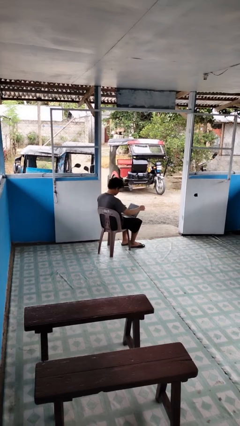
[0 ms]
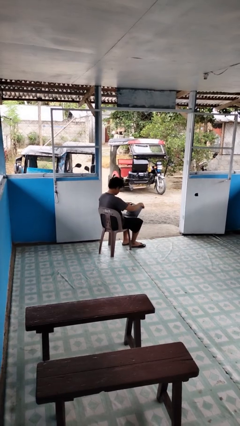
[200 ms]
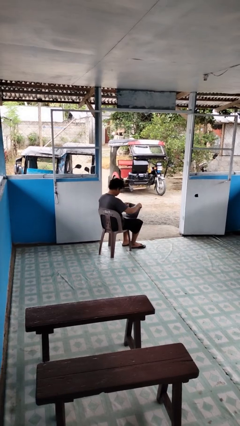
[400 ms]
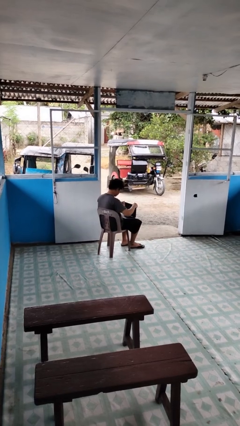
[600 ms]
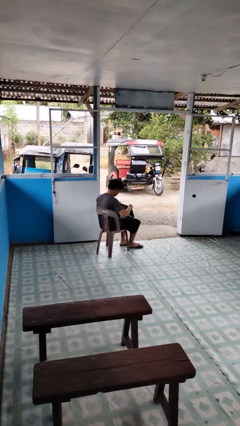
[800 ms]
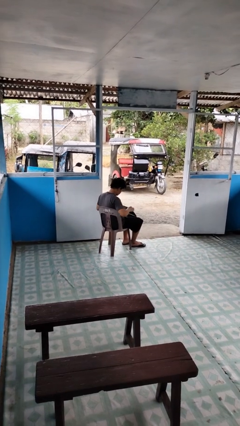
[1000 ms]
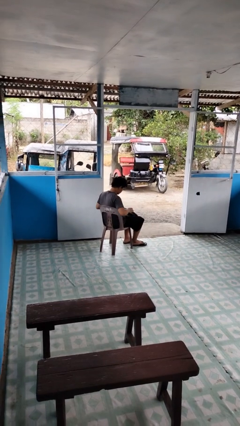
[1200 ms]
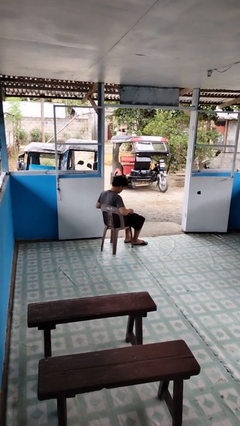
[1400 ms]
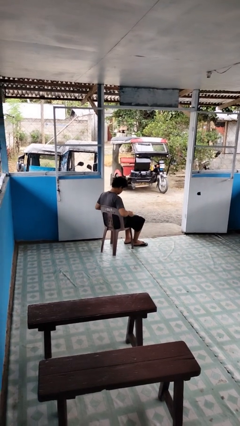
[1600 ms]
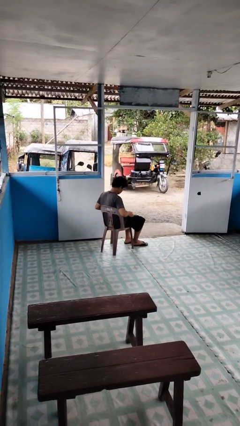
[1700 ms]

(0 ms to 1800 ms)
person closes laptop

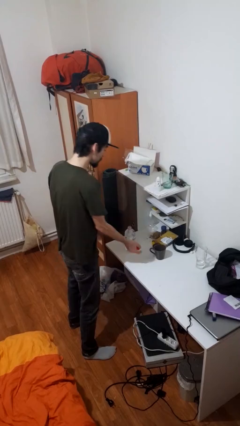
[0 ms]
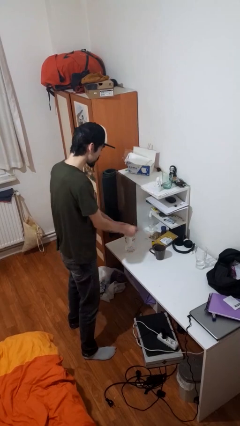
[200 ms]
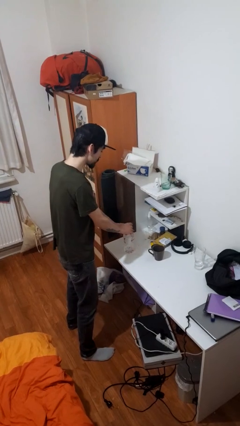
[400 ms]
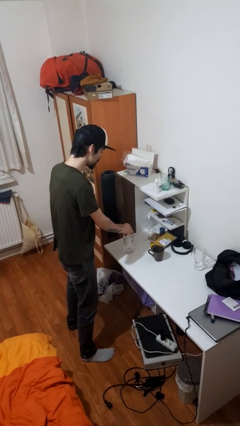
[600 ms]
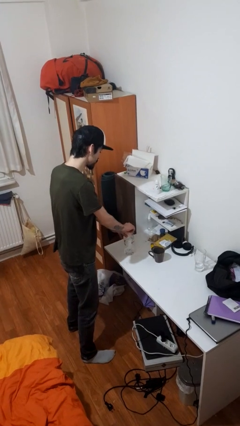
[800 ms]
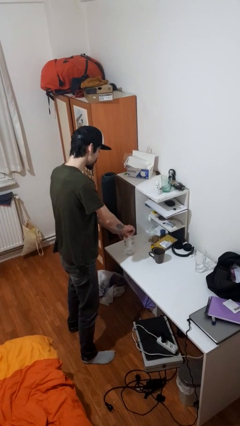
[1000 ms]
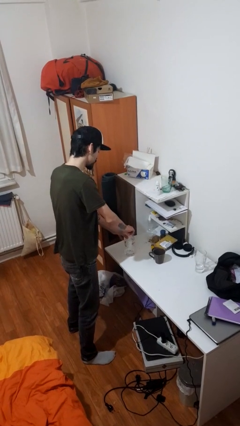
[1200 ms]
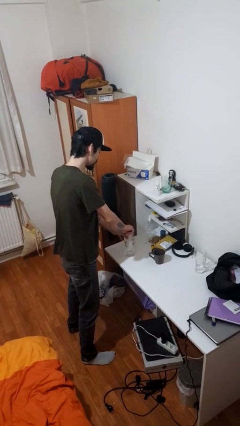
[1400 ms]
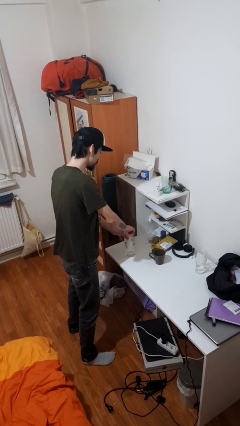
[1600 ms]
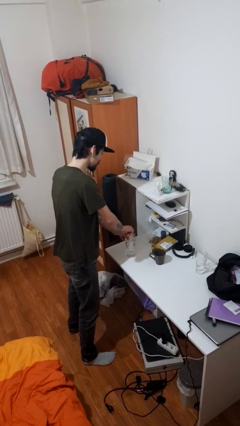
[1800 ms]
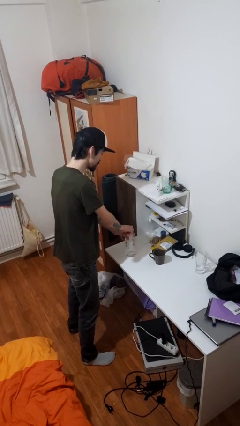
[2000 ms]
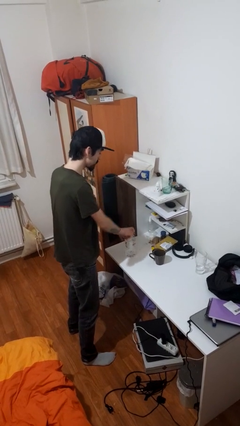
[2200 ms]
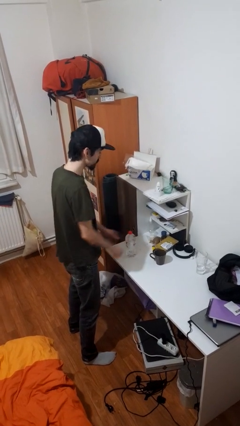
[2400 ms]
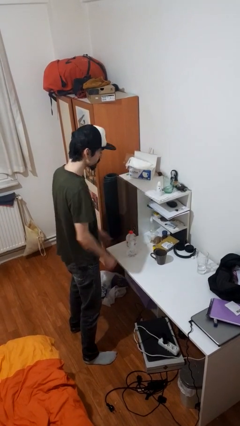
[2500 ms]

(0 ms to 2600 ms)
person screws lid to bottle

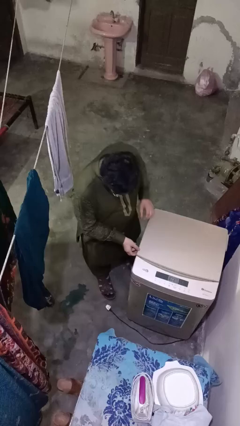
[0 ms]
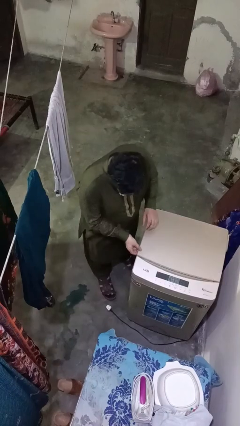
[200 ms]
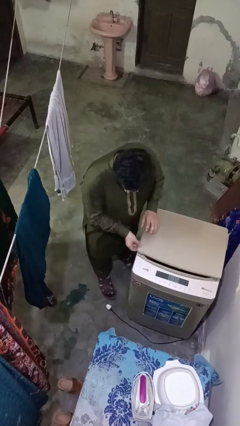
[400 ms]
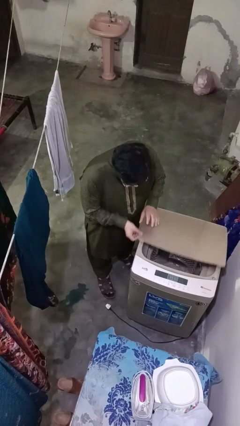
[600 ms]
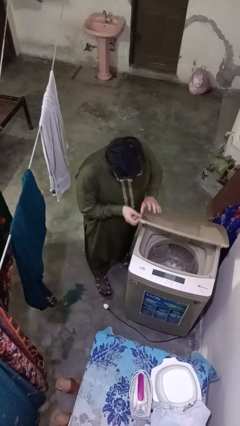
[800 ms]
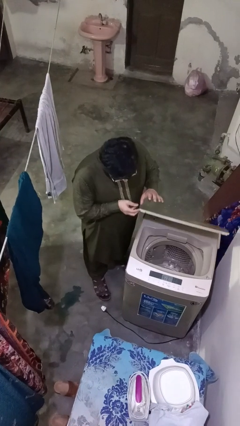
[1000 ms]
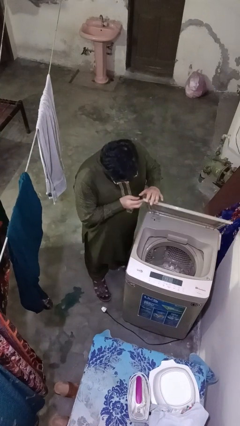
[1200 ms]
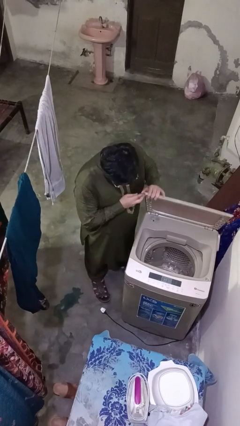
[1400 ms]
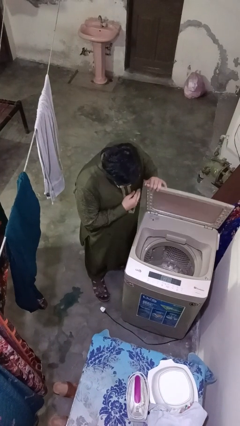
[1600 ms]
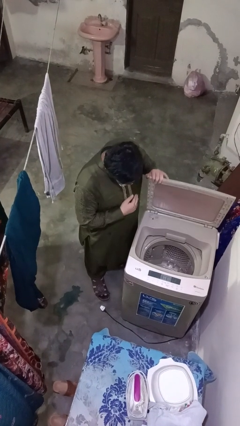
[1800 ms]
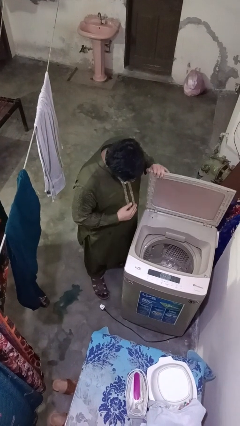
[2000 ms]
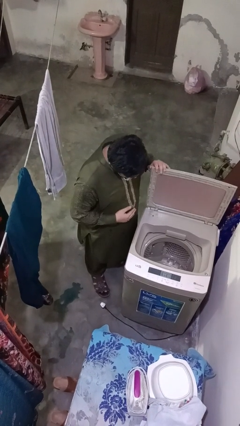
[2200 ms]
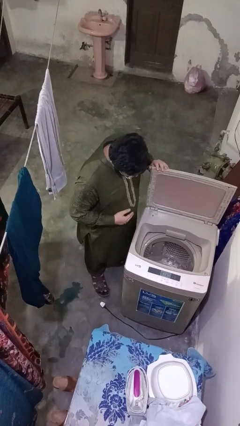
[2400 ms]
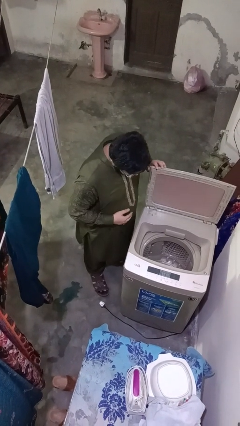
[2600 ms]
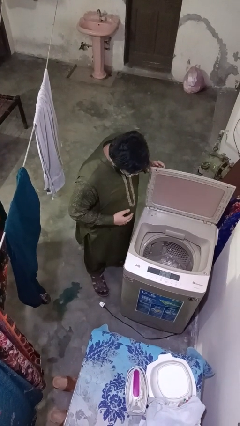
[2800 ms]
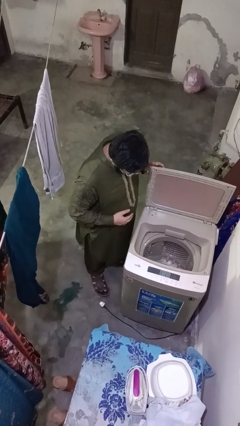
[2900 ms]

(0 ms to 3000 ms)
person opens clothes washer

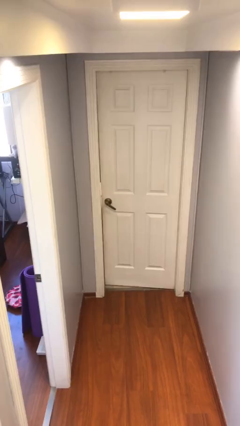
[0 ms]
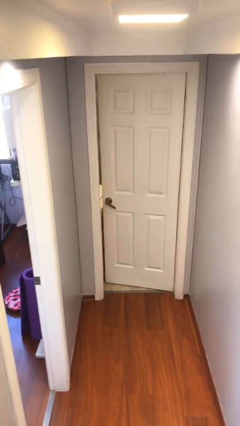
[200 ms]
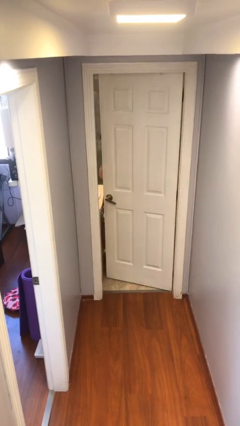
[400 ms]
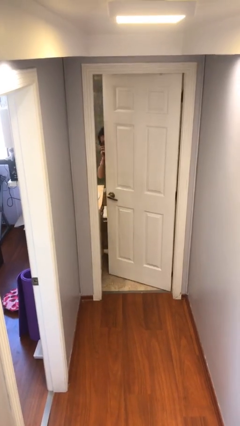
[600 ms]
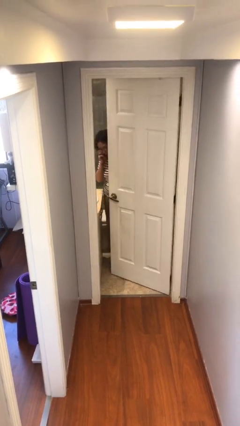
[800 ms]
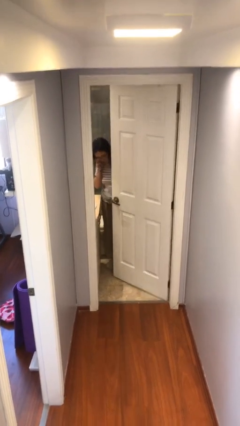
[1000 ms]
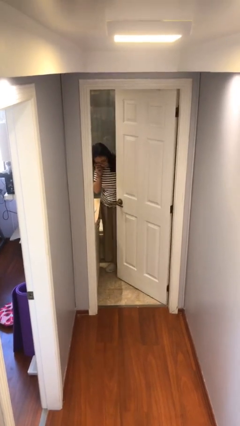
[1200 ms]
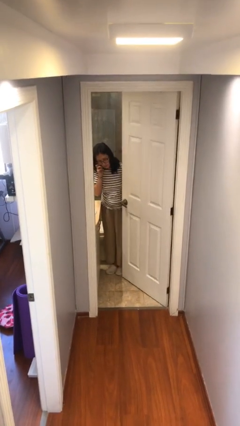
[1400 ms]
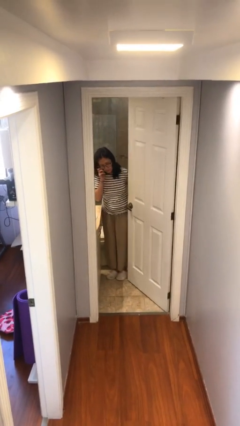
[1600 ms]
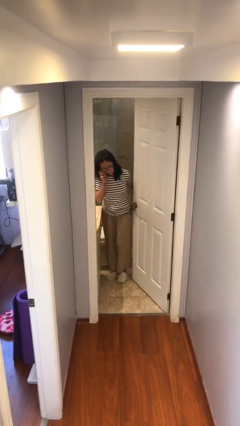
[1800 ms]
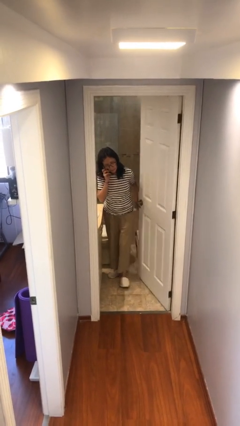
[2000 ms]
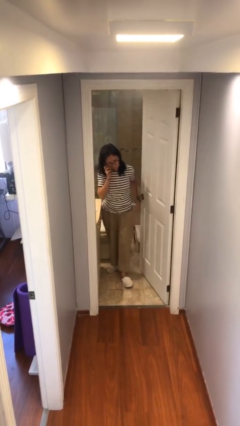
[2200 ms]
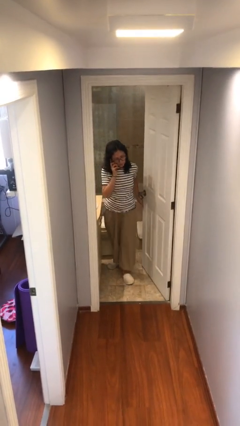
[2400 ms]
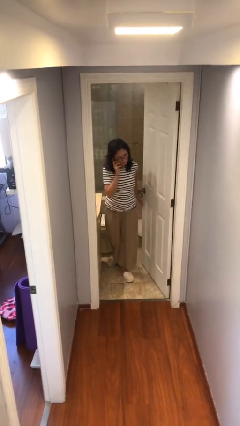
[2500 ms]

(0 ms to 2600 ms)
person opens facility door

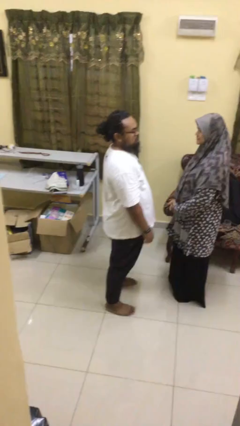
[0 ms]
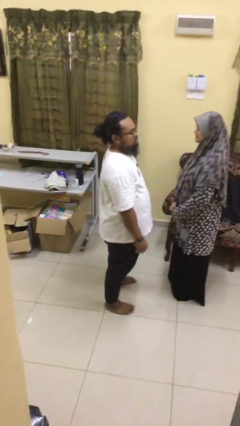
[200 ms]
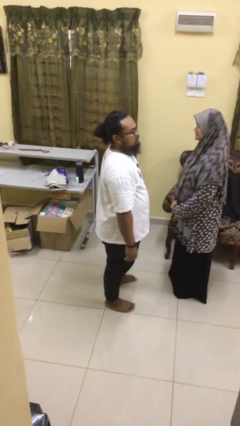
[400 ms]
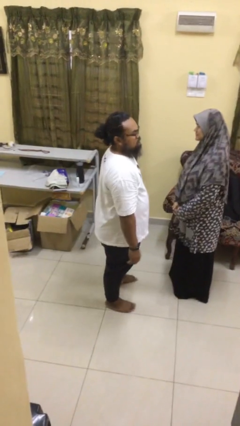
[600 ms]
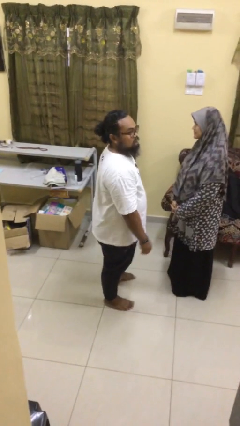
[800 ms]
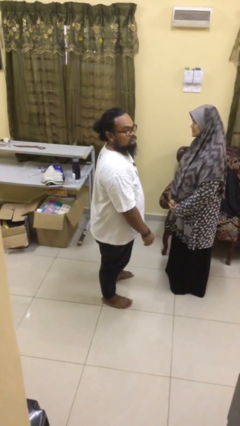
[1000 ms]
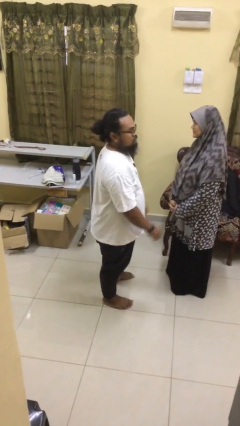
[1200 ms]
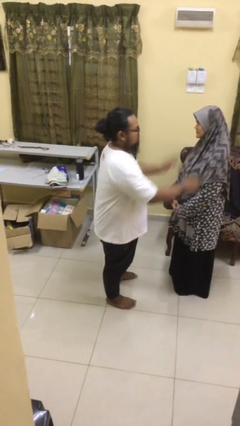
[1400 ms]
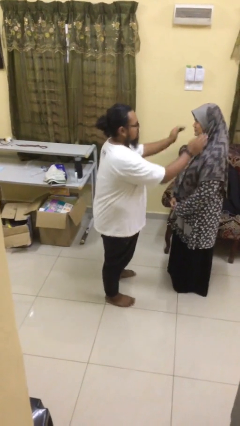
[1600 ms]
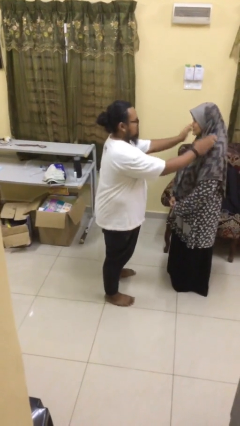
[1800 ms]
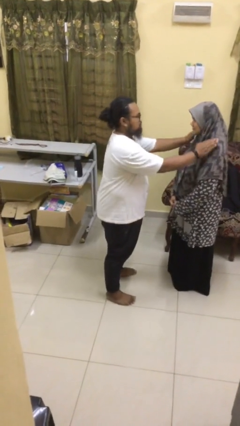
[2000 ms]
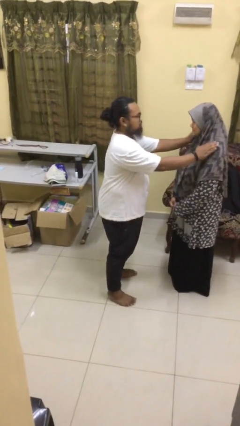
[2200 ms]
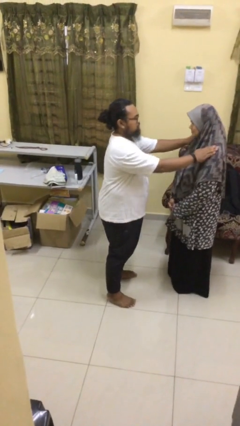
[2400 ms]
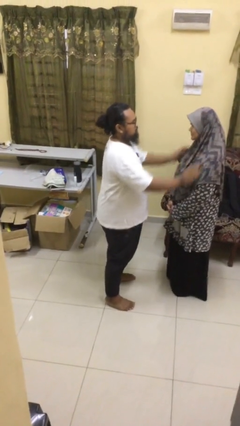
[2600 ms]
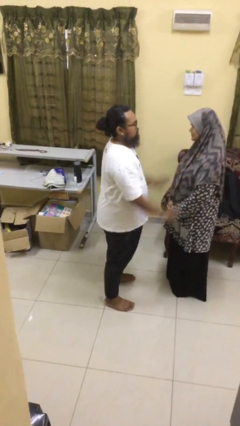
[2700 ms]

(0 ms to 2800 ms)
person pounds shoulders of person

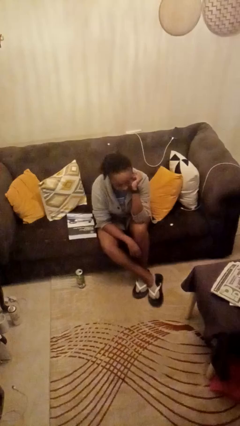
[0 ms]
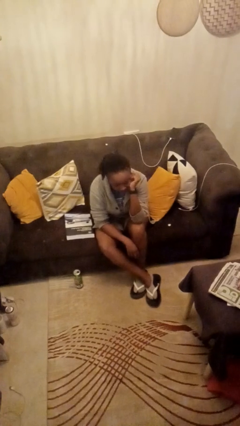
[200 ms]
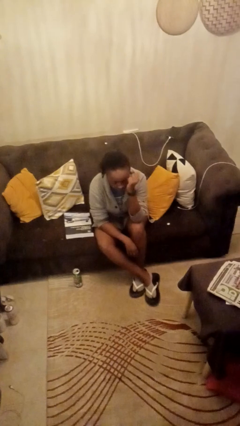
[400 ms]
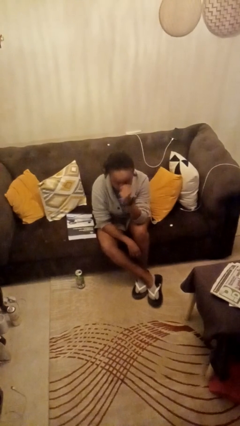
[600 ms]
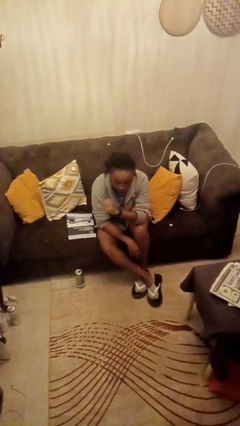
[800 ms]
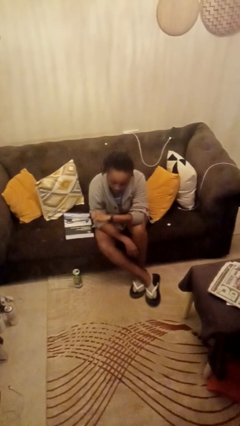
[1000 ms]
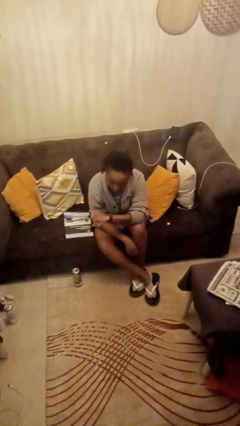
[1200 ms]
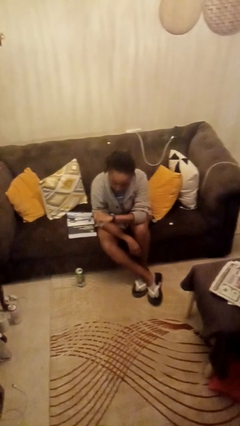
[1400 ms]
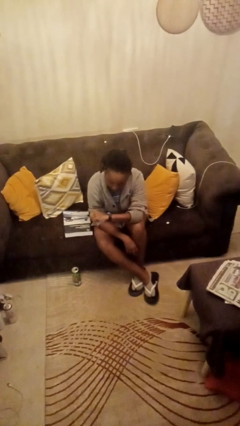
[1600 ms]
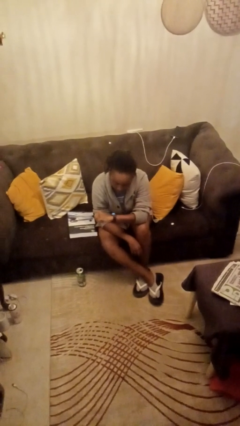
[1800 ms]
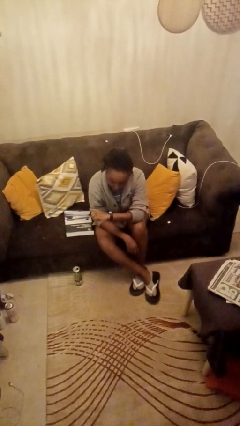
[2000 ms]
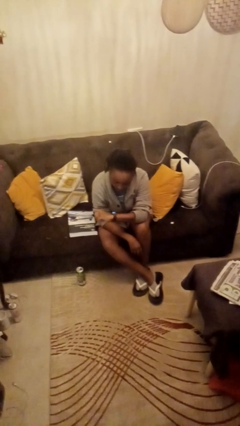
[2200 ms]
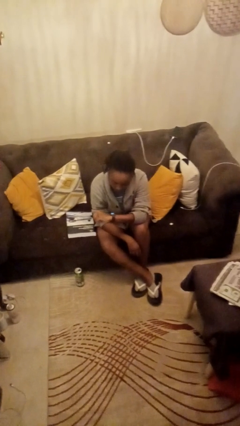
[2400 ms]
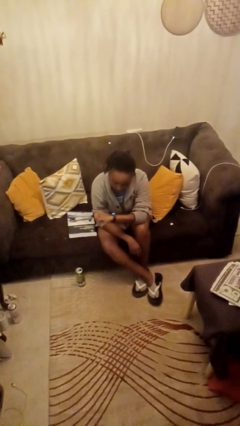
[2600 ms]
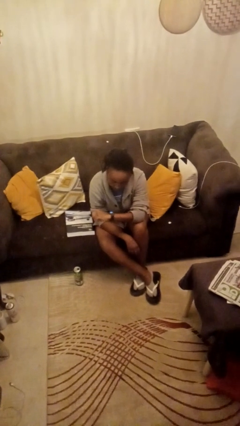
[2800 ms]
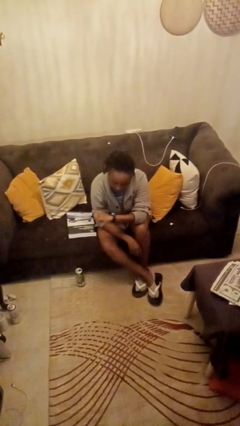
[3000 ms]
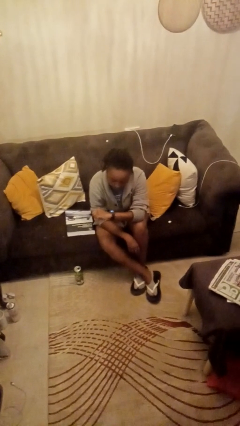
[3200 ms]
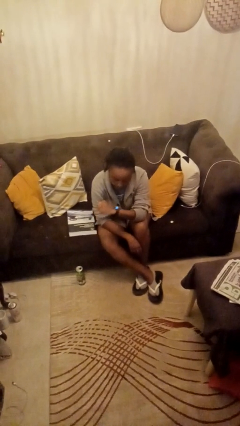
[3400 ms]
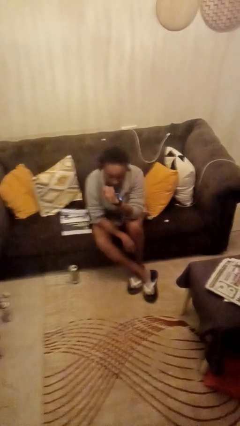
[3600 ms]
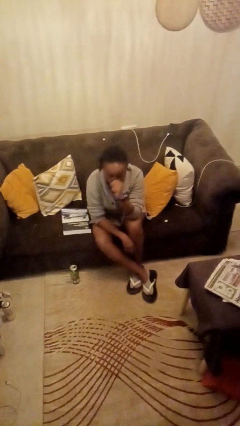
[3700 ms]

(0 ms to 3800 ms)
person looks at wristwatch

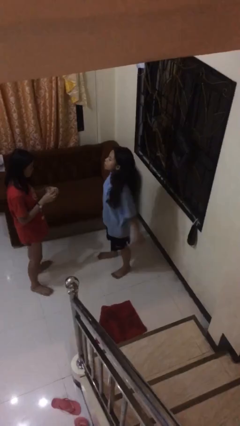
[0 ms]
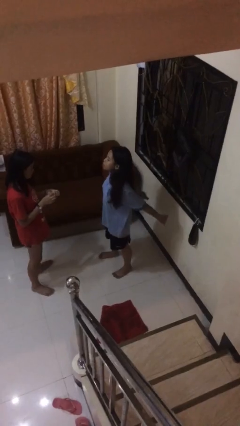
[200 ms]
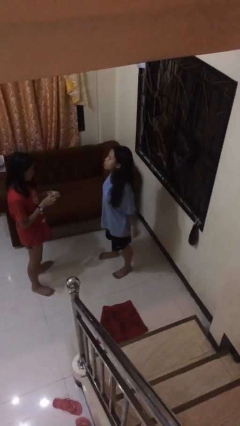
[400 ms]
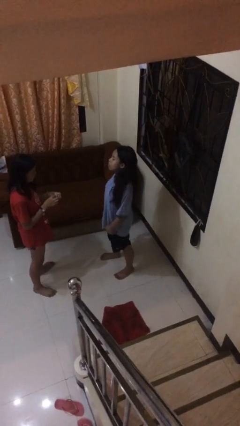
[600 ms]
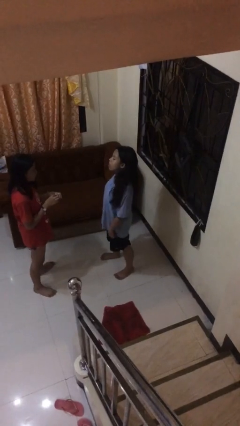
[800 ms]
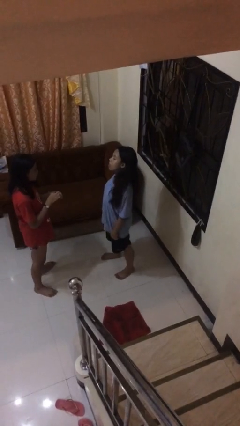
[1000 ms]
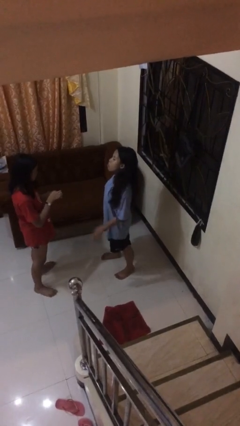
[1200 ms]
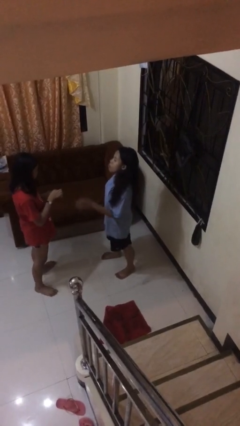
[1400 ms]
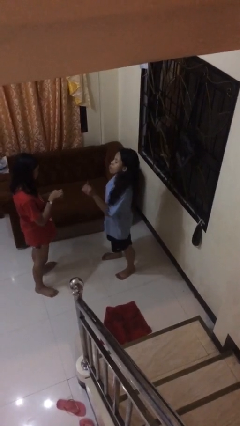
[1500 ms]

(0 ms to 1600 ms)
person talks to person
